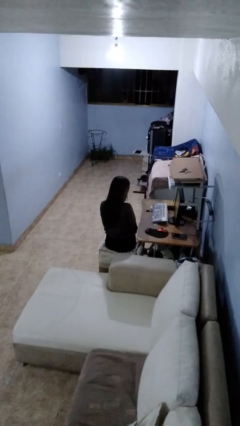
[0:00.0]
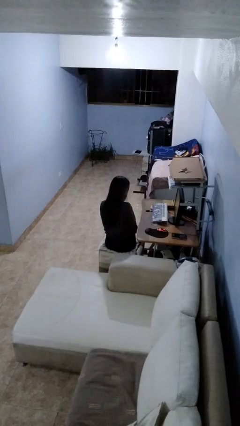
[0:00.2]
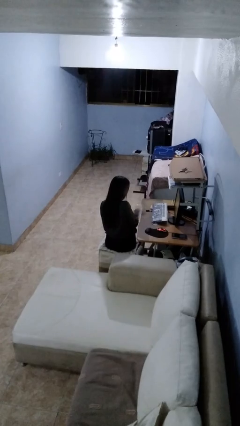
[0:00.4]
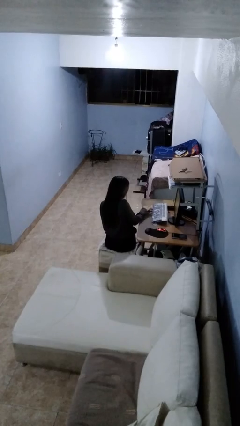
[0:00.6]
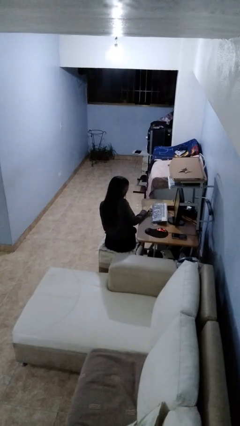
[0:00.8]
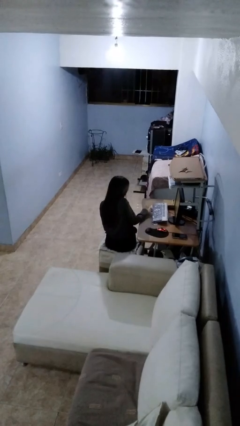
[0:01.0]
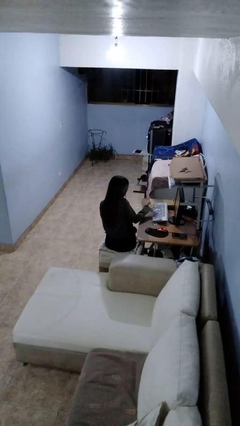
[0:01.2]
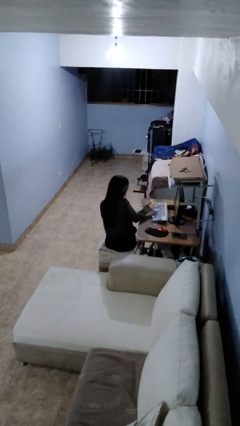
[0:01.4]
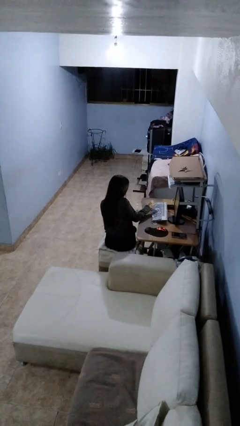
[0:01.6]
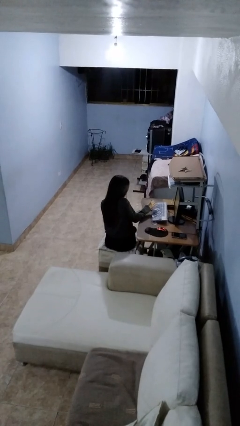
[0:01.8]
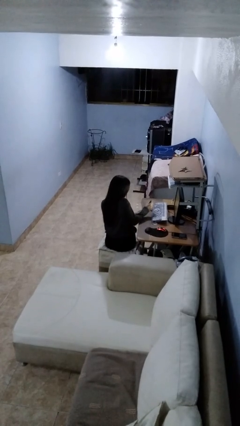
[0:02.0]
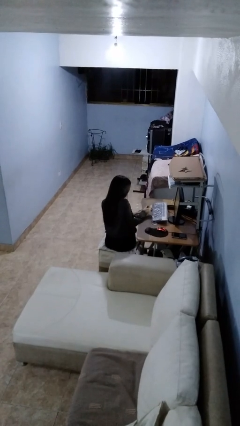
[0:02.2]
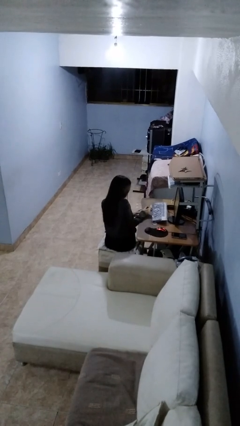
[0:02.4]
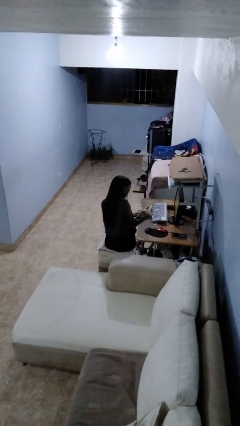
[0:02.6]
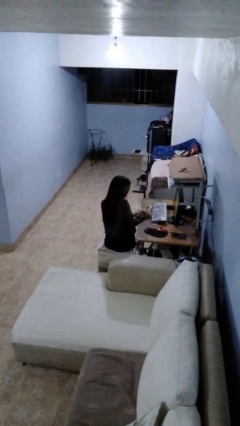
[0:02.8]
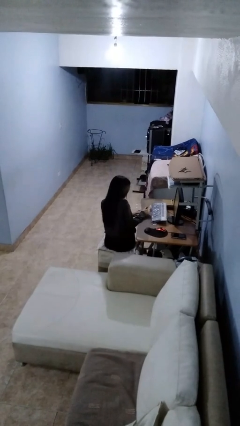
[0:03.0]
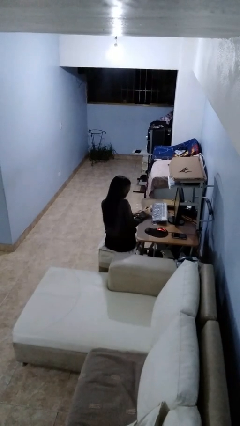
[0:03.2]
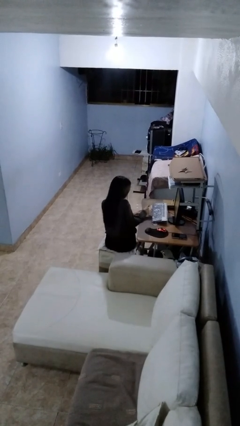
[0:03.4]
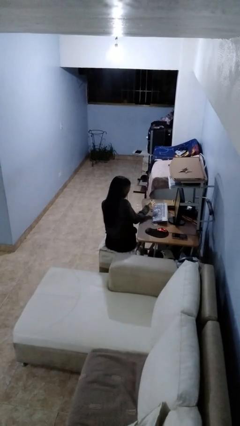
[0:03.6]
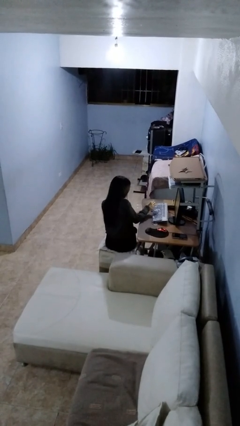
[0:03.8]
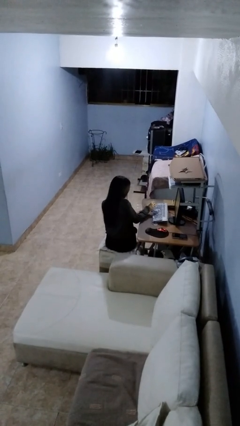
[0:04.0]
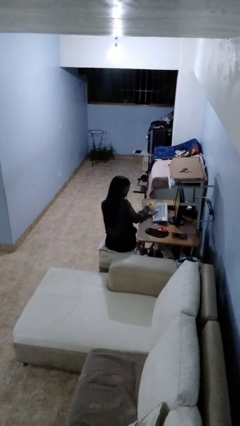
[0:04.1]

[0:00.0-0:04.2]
person paints fingernails

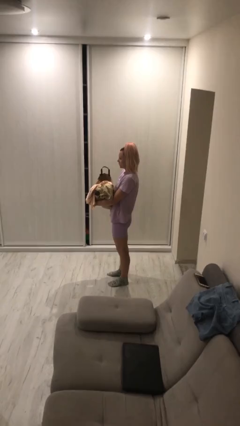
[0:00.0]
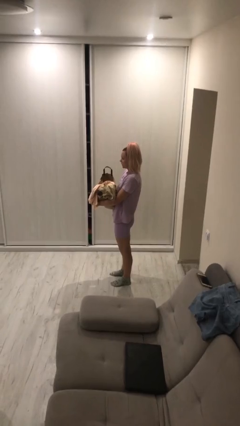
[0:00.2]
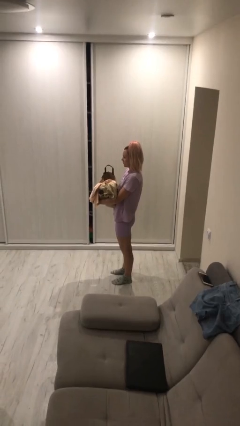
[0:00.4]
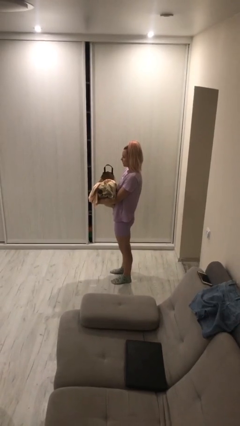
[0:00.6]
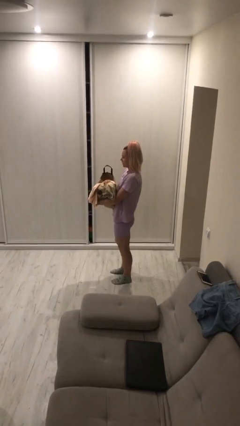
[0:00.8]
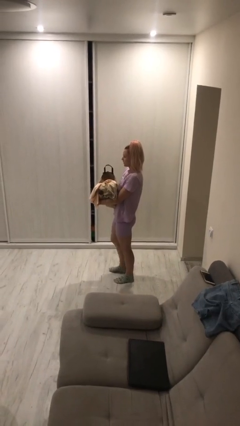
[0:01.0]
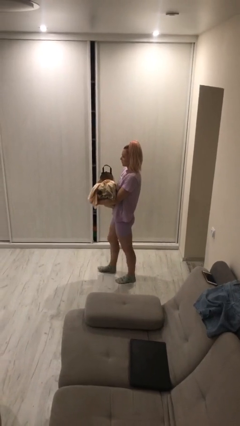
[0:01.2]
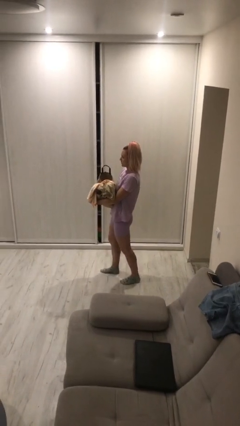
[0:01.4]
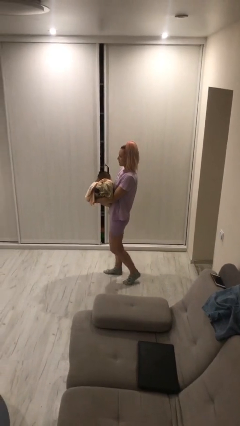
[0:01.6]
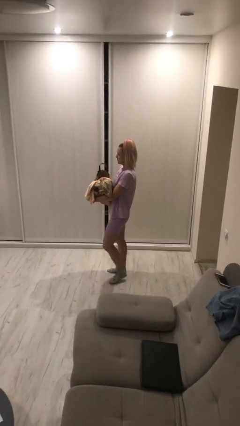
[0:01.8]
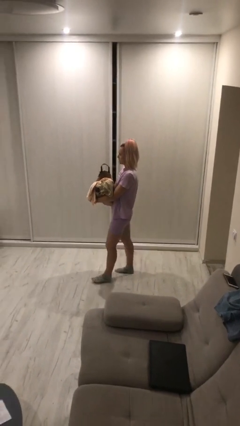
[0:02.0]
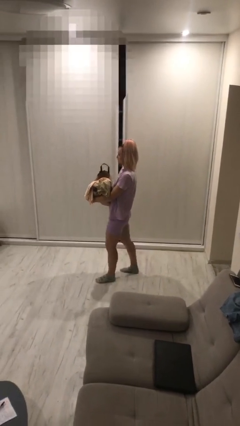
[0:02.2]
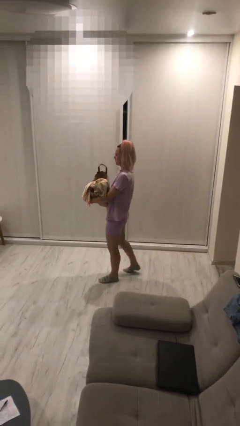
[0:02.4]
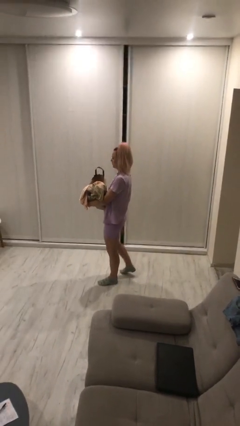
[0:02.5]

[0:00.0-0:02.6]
person carries laundry basket

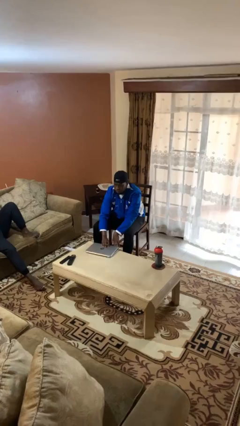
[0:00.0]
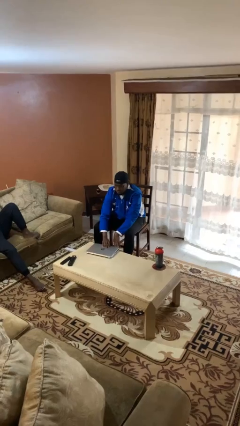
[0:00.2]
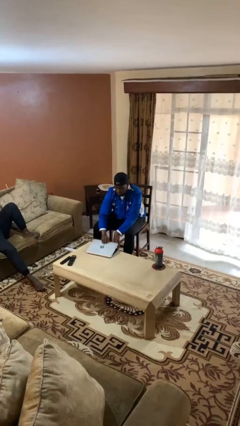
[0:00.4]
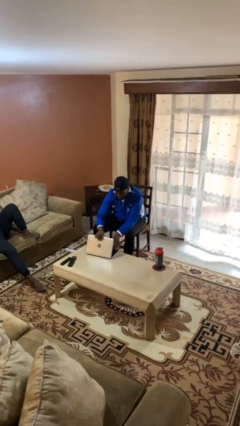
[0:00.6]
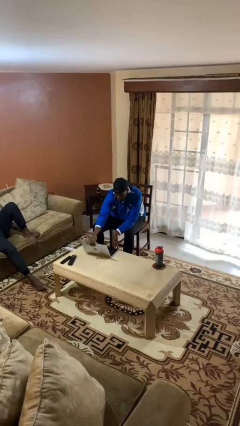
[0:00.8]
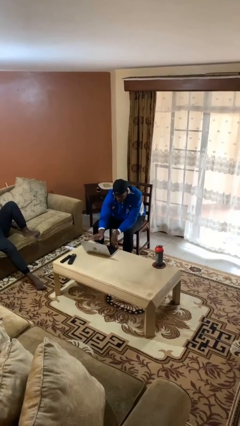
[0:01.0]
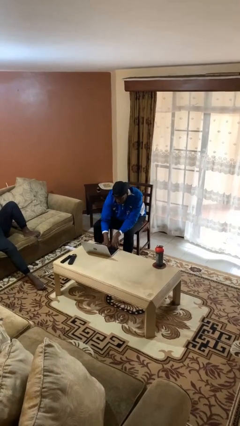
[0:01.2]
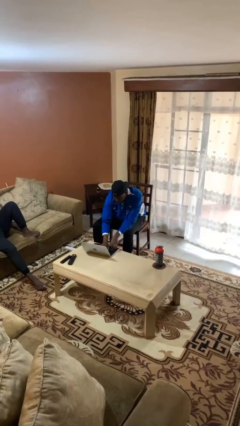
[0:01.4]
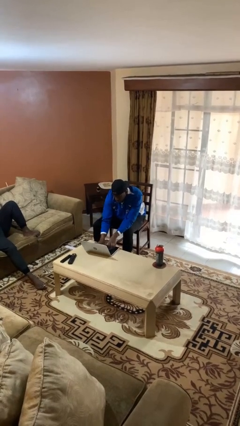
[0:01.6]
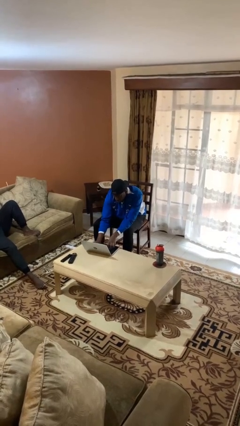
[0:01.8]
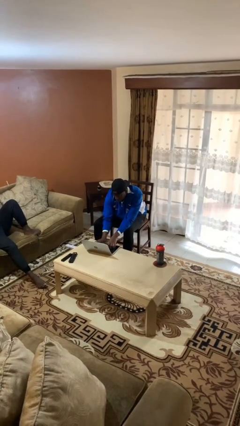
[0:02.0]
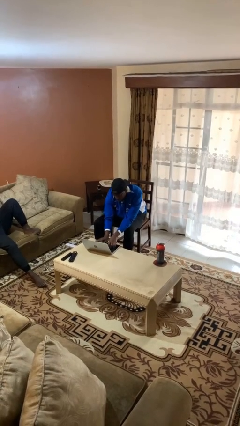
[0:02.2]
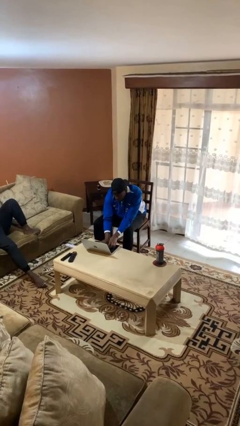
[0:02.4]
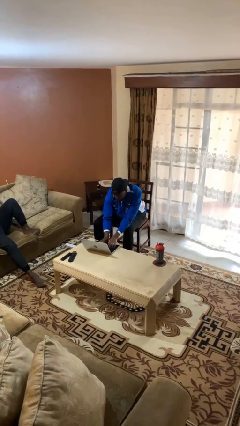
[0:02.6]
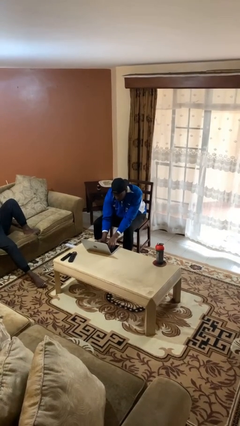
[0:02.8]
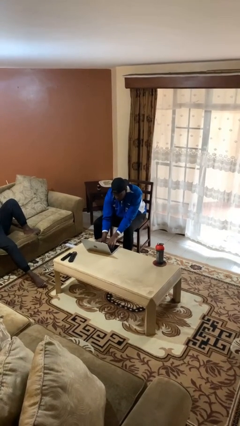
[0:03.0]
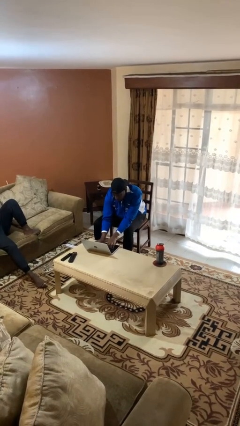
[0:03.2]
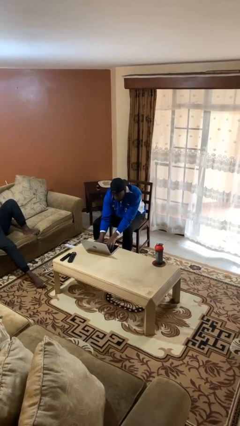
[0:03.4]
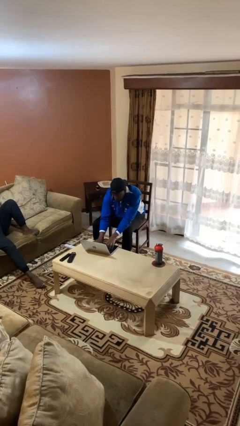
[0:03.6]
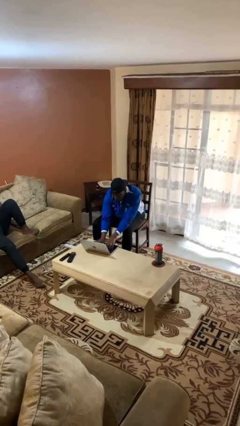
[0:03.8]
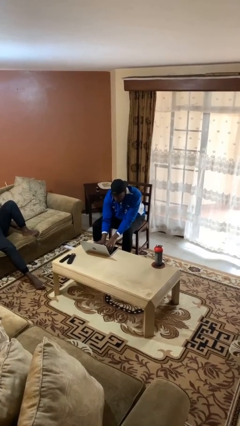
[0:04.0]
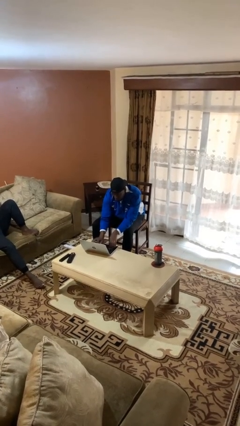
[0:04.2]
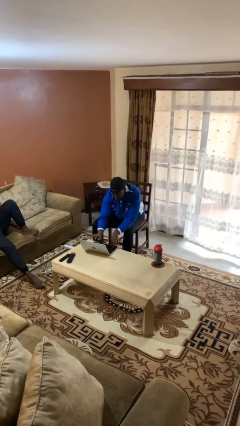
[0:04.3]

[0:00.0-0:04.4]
person interacts with laptop

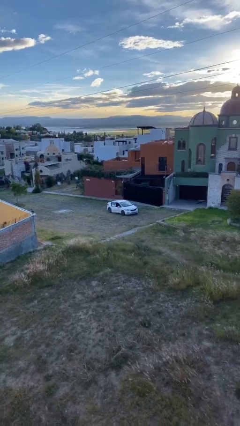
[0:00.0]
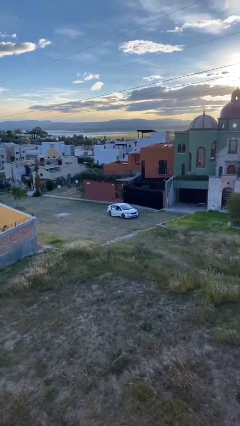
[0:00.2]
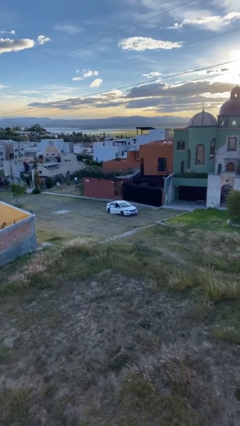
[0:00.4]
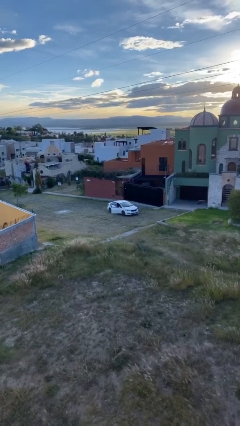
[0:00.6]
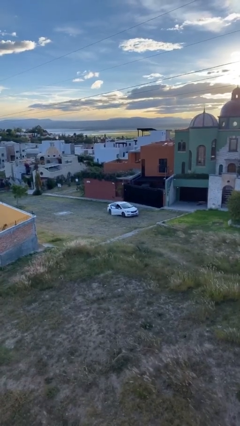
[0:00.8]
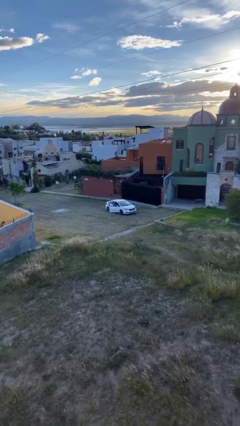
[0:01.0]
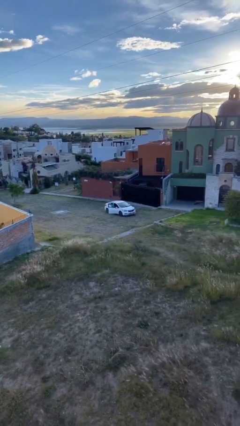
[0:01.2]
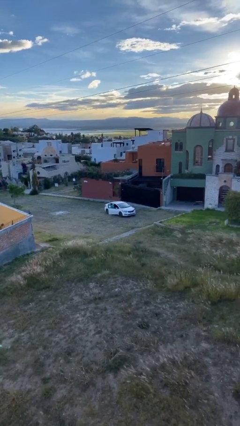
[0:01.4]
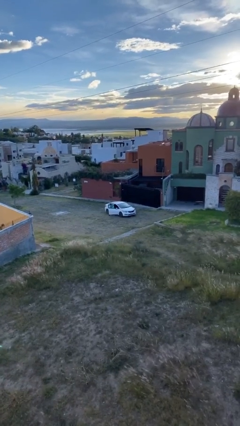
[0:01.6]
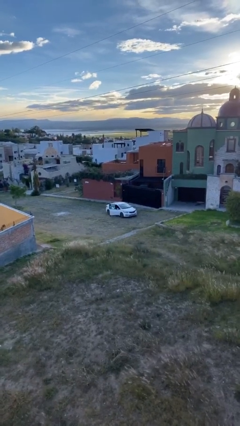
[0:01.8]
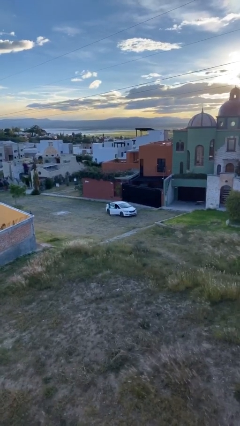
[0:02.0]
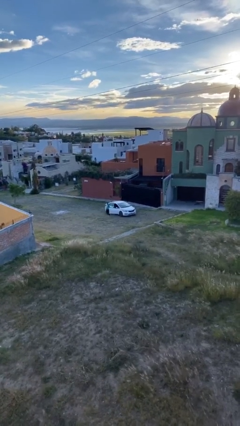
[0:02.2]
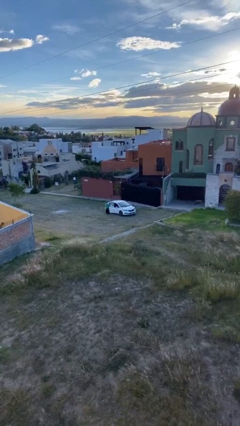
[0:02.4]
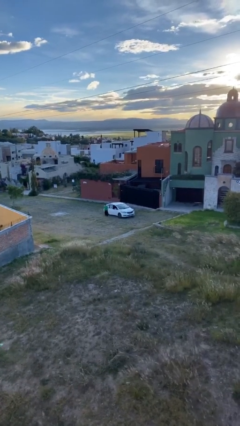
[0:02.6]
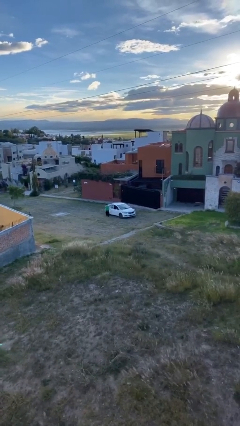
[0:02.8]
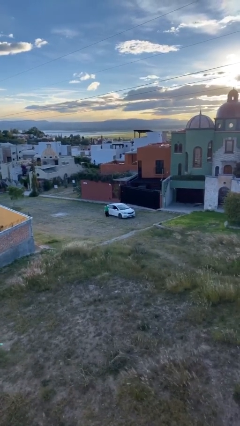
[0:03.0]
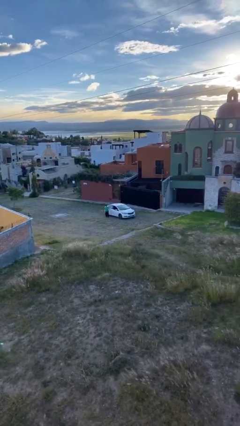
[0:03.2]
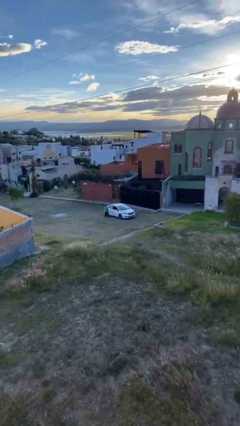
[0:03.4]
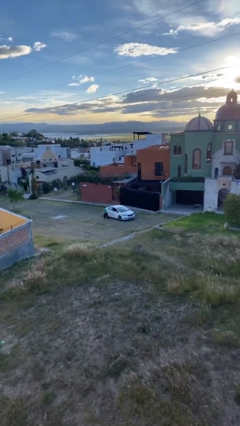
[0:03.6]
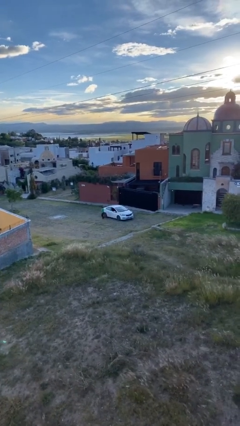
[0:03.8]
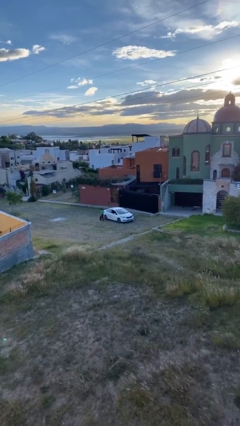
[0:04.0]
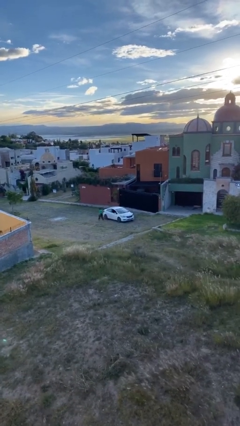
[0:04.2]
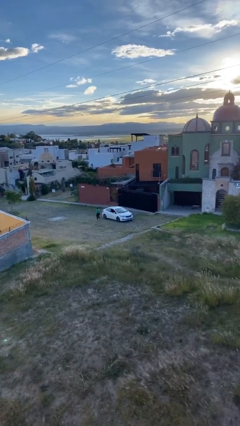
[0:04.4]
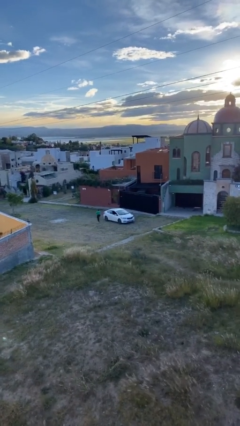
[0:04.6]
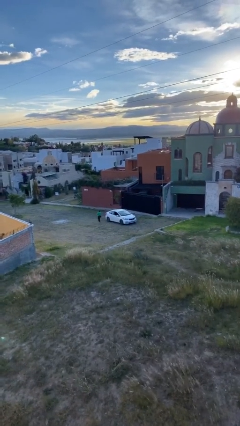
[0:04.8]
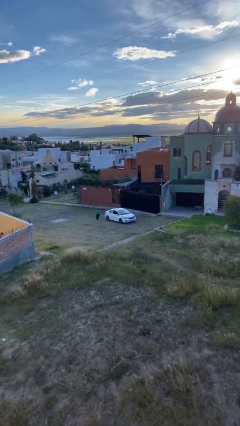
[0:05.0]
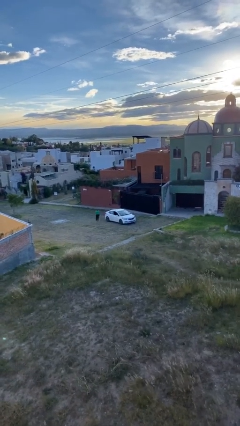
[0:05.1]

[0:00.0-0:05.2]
car drops off person

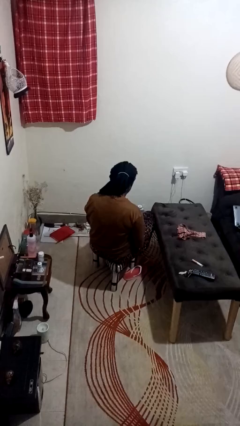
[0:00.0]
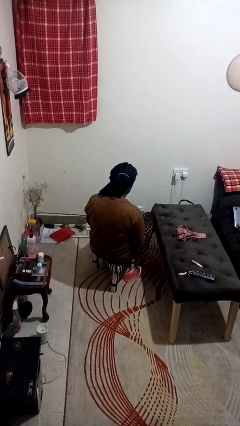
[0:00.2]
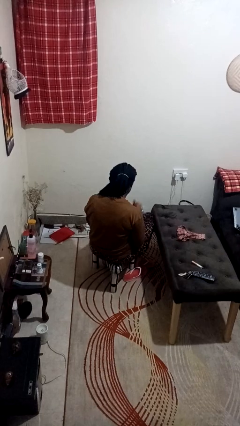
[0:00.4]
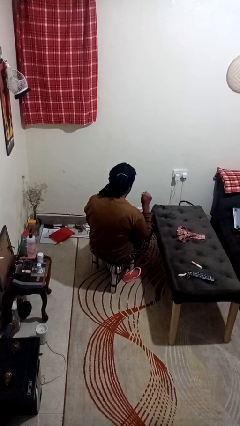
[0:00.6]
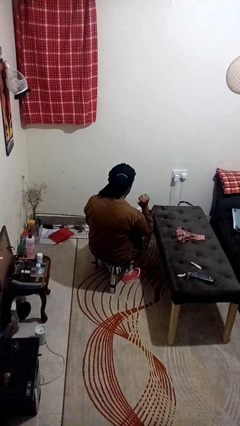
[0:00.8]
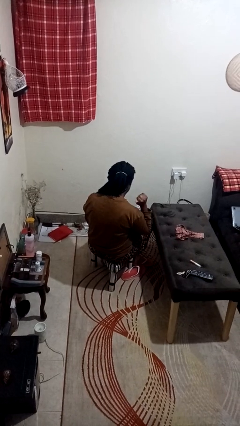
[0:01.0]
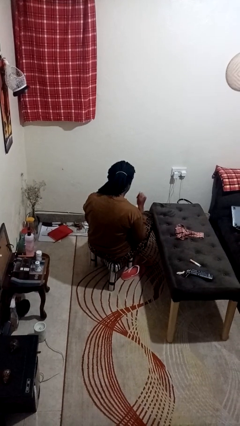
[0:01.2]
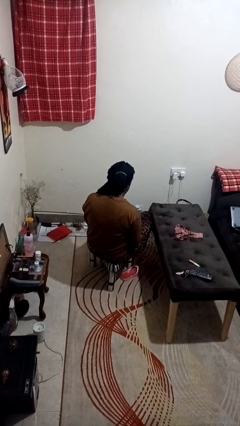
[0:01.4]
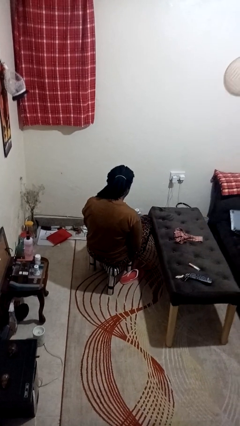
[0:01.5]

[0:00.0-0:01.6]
person gestures behind me
